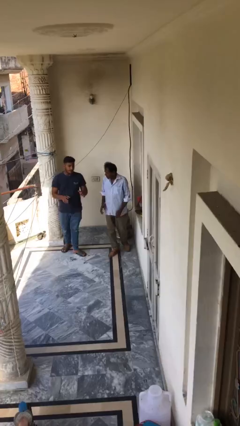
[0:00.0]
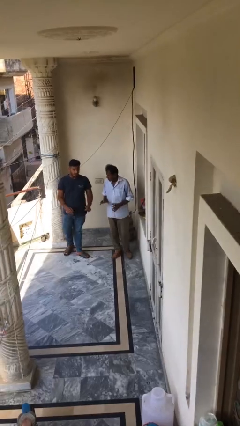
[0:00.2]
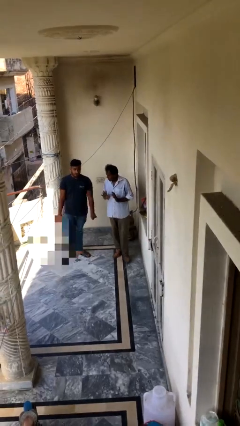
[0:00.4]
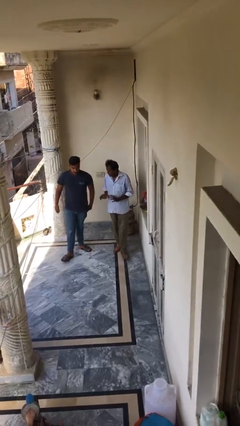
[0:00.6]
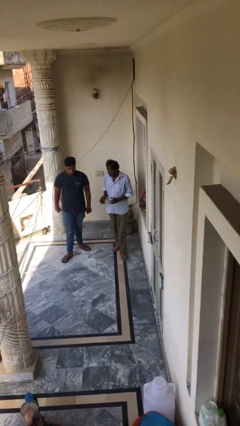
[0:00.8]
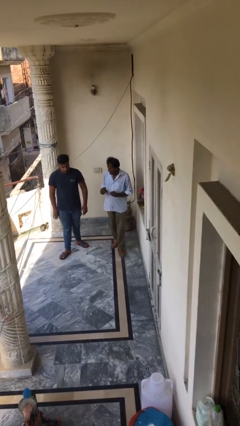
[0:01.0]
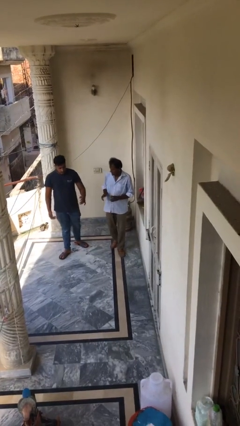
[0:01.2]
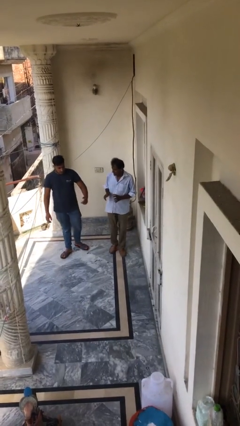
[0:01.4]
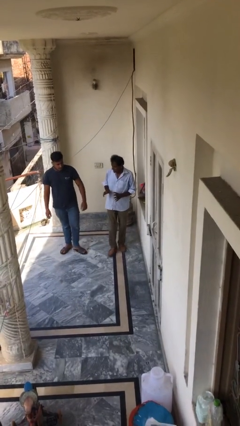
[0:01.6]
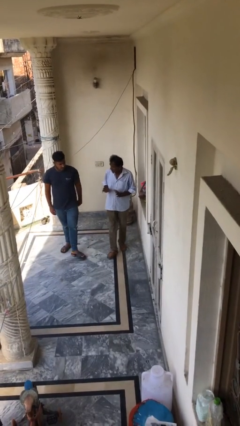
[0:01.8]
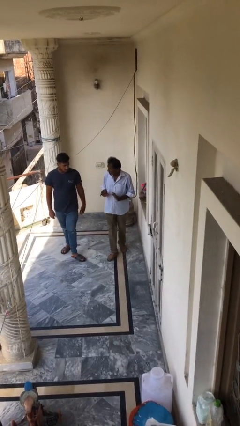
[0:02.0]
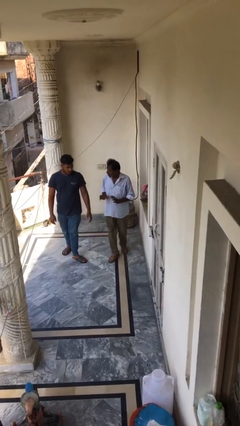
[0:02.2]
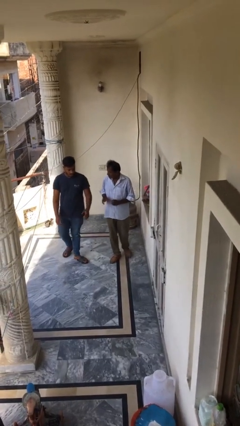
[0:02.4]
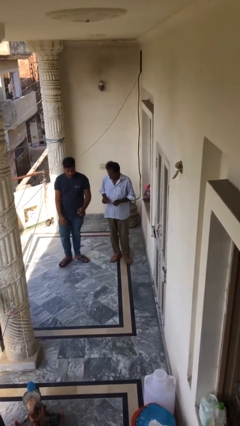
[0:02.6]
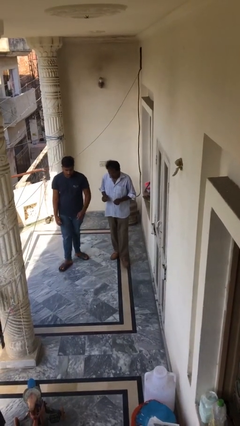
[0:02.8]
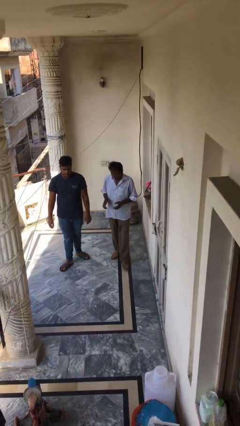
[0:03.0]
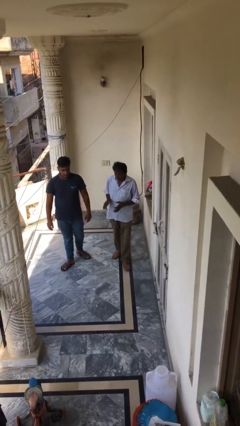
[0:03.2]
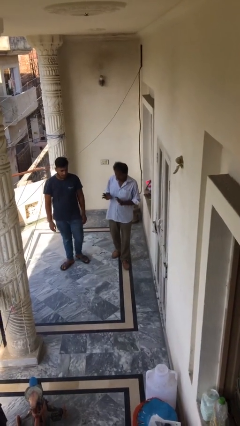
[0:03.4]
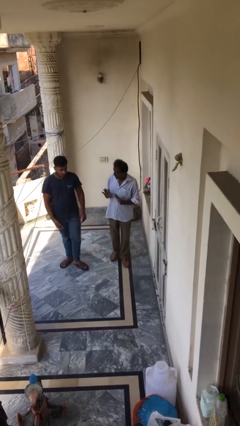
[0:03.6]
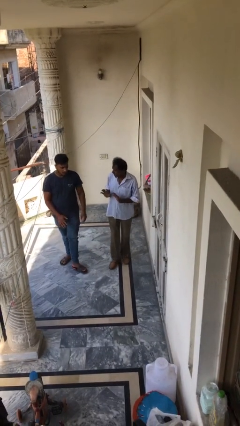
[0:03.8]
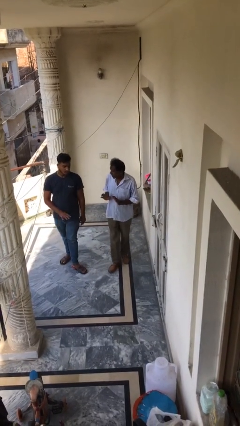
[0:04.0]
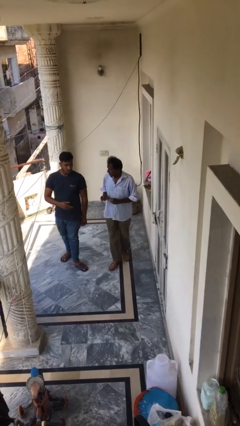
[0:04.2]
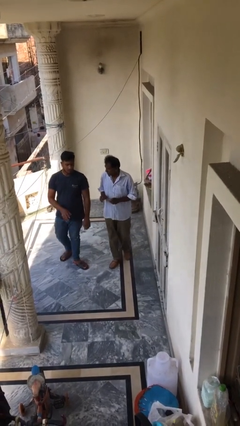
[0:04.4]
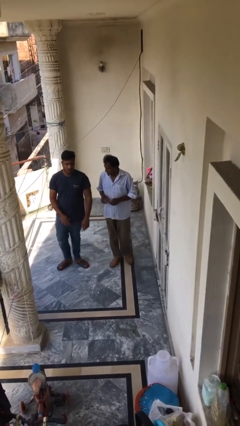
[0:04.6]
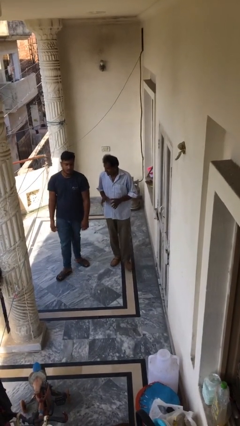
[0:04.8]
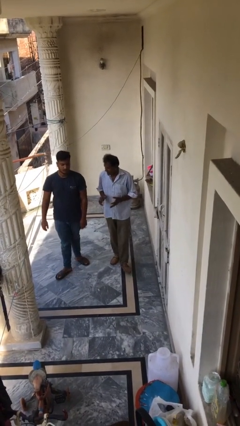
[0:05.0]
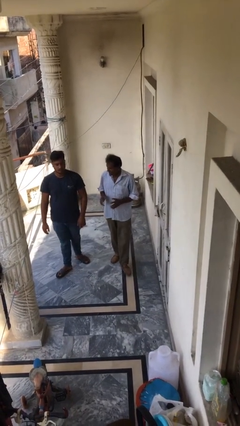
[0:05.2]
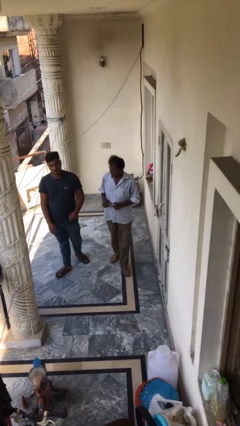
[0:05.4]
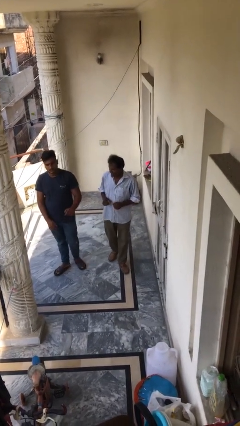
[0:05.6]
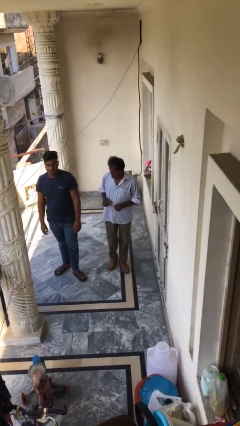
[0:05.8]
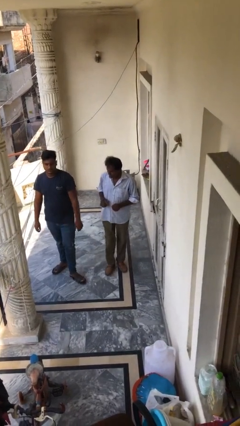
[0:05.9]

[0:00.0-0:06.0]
person talks to person

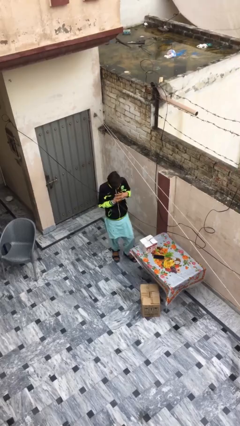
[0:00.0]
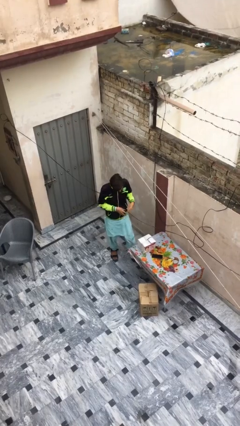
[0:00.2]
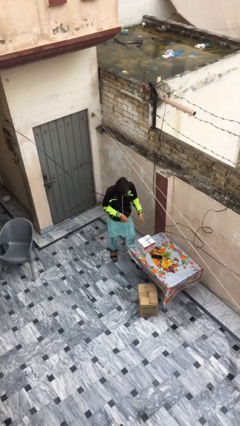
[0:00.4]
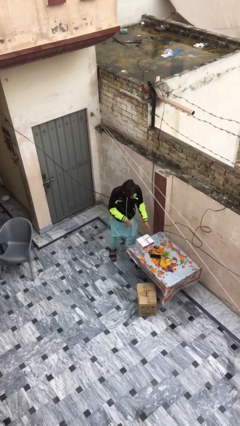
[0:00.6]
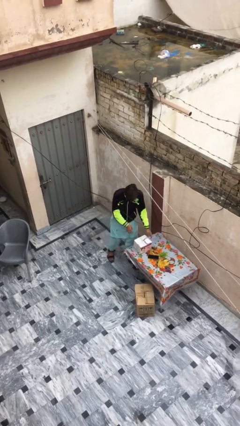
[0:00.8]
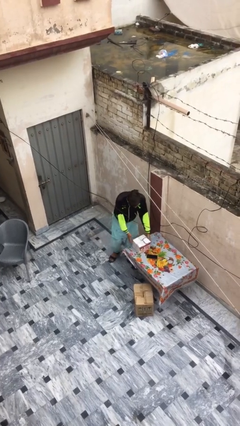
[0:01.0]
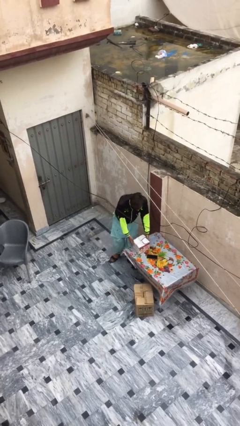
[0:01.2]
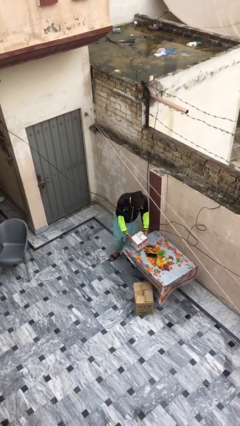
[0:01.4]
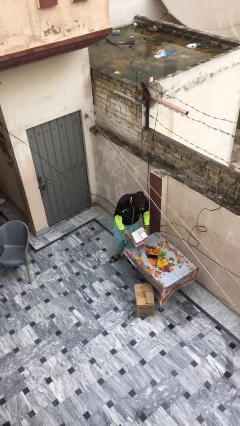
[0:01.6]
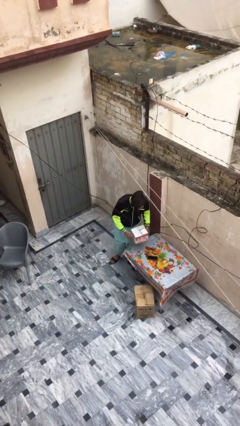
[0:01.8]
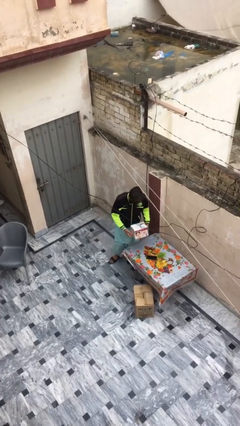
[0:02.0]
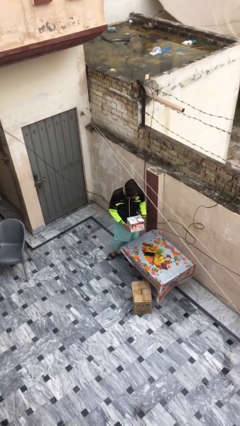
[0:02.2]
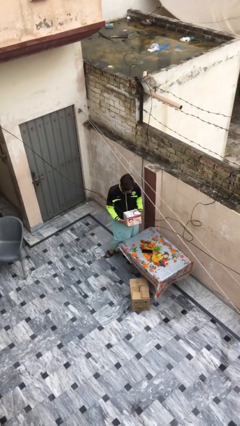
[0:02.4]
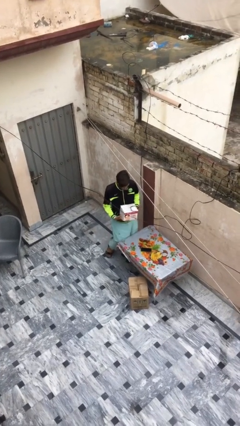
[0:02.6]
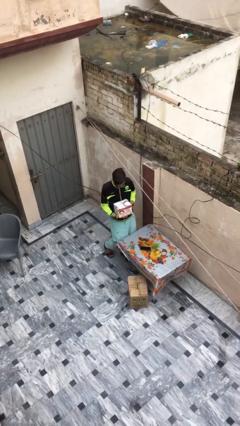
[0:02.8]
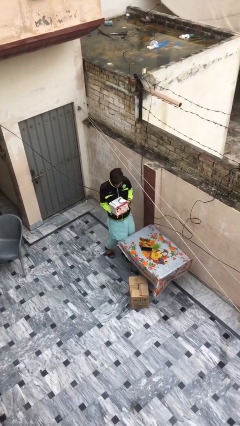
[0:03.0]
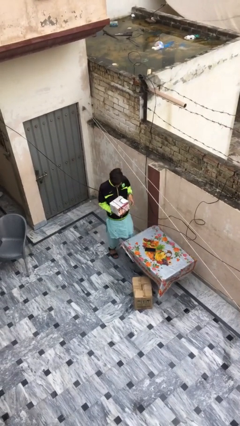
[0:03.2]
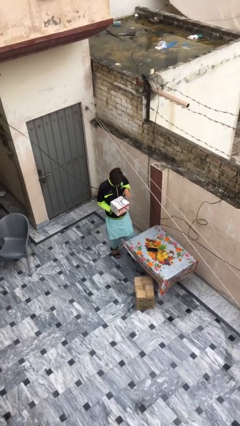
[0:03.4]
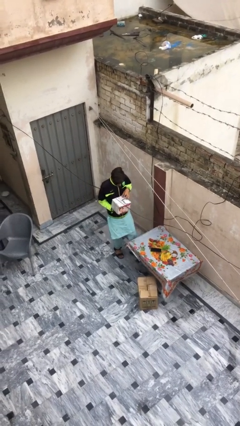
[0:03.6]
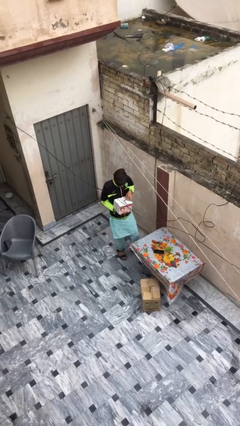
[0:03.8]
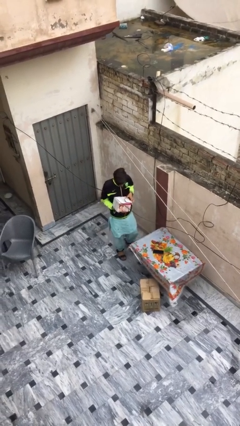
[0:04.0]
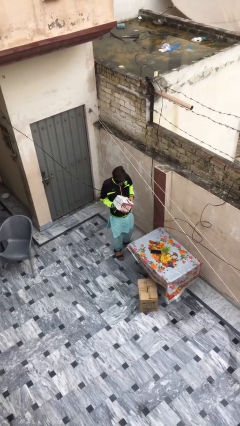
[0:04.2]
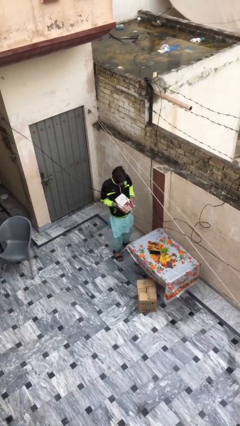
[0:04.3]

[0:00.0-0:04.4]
person picks up object from table

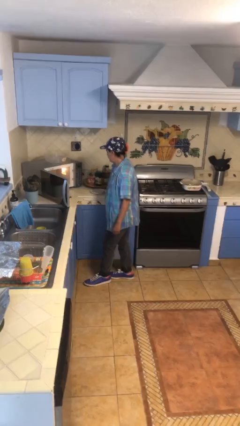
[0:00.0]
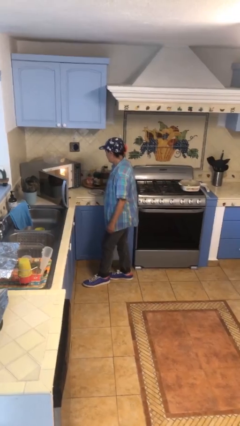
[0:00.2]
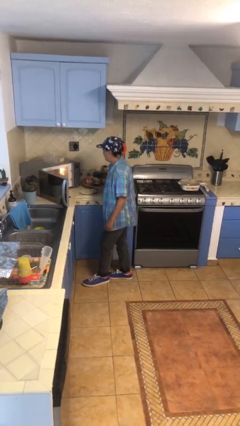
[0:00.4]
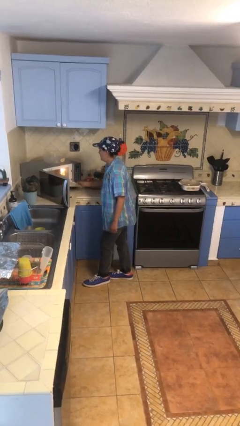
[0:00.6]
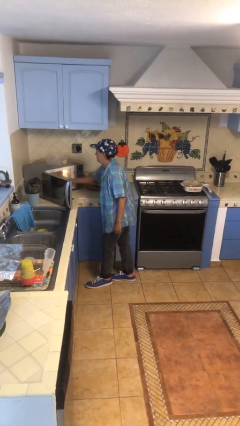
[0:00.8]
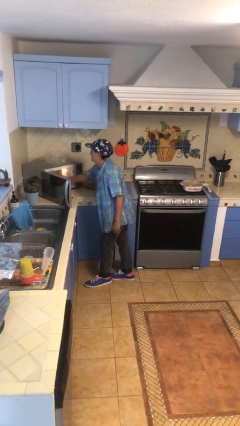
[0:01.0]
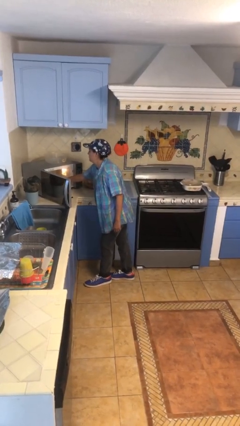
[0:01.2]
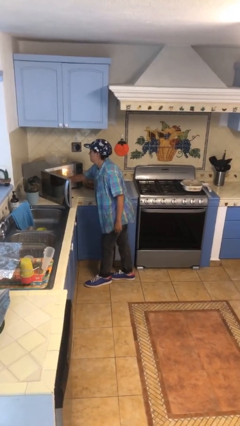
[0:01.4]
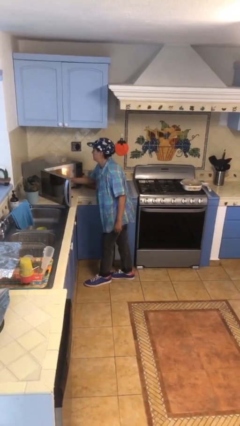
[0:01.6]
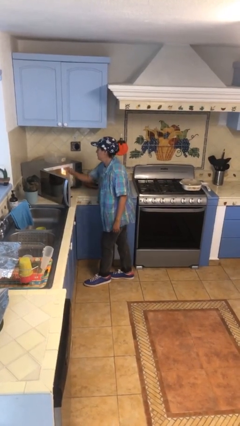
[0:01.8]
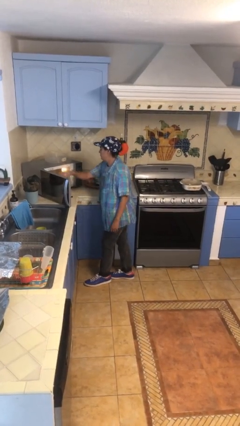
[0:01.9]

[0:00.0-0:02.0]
person puts object into microwave

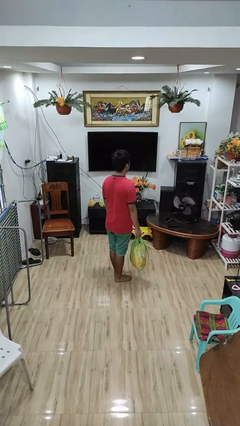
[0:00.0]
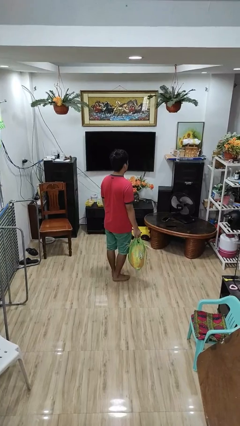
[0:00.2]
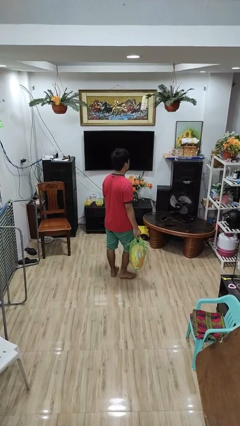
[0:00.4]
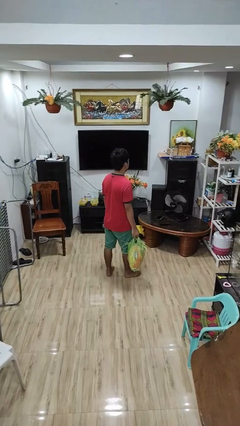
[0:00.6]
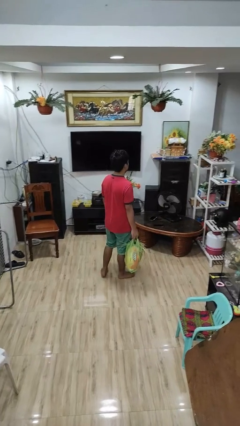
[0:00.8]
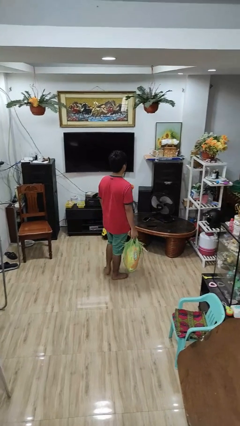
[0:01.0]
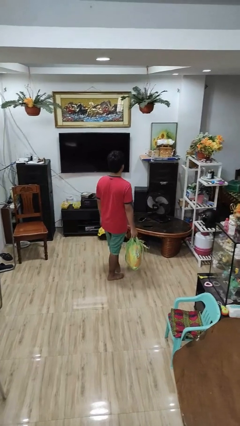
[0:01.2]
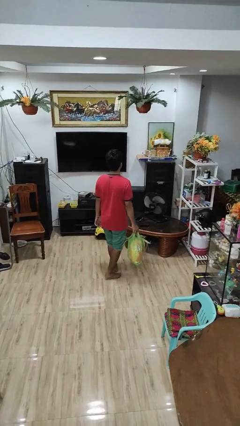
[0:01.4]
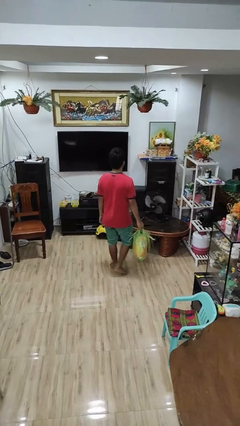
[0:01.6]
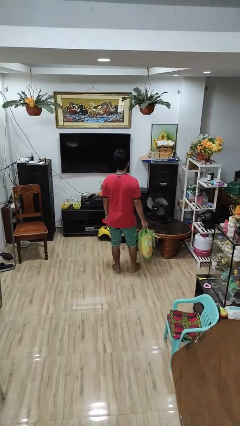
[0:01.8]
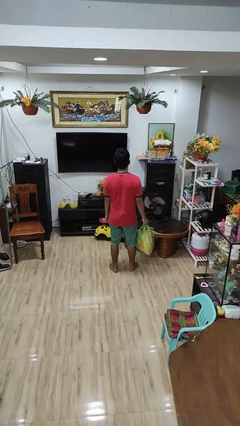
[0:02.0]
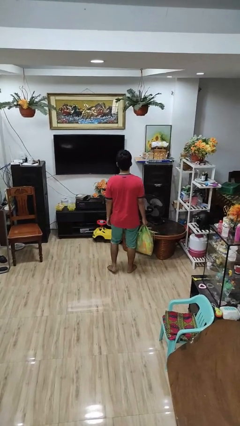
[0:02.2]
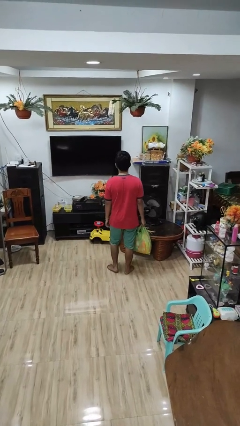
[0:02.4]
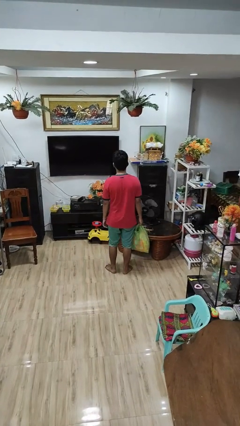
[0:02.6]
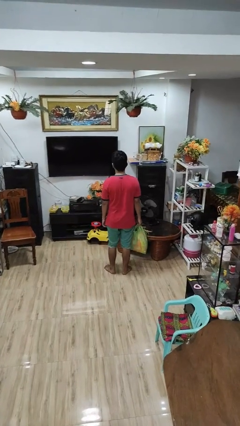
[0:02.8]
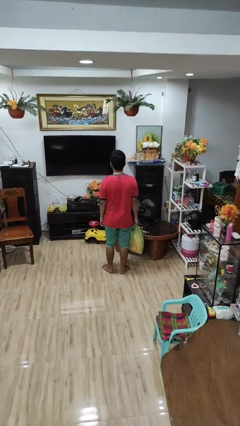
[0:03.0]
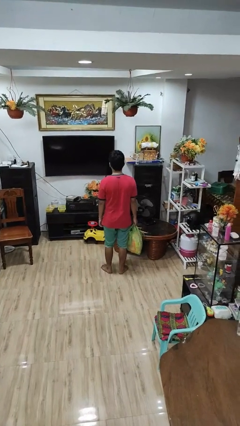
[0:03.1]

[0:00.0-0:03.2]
person carries groceries

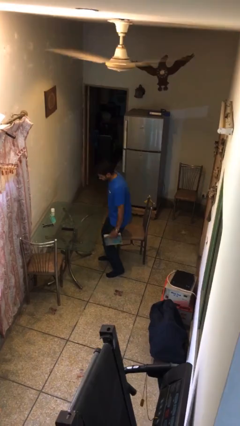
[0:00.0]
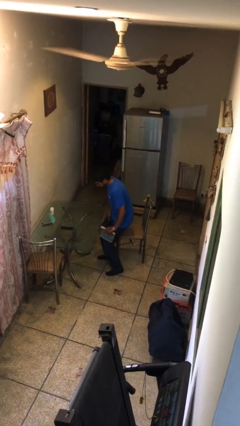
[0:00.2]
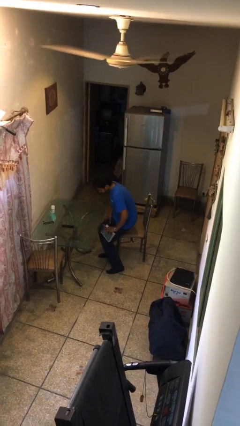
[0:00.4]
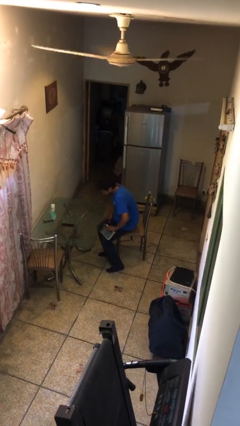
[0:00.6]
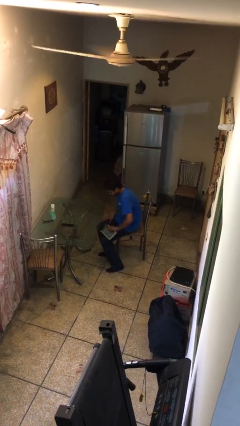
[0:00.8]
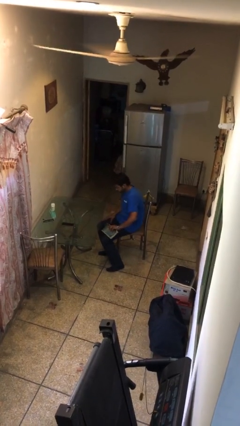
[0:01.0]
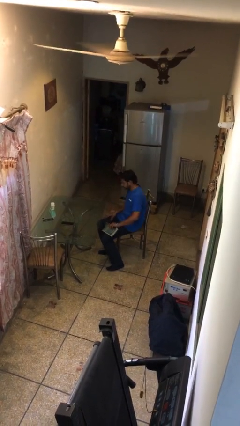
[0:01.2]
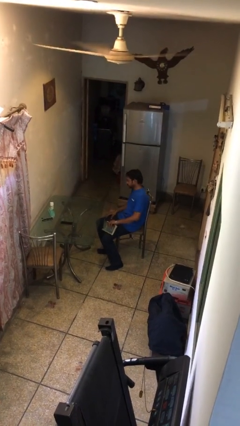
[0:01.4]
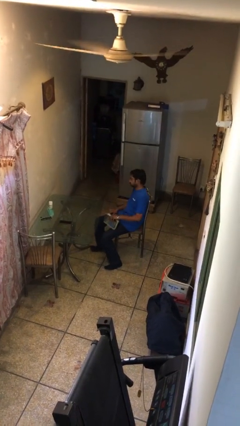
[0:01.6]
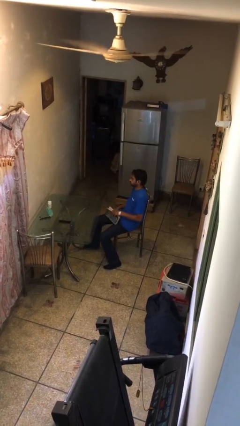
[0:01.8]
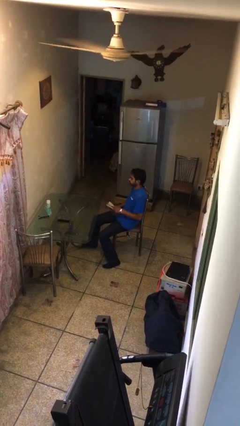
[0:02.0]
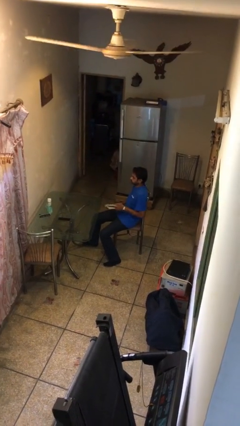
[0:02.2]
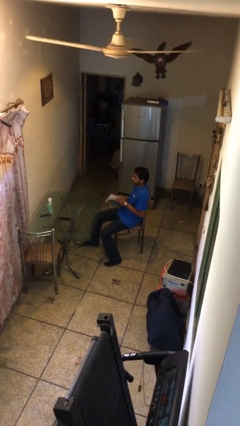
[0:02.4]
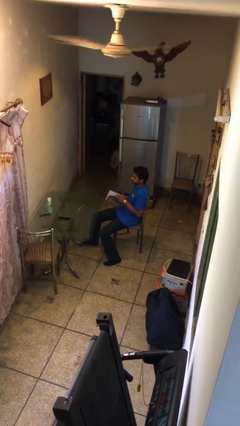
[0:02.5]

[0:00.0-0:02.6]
person sits down
